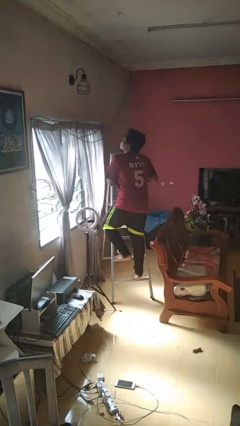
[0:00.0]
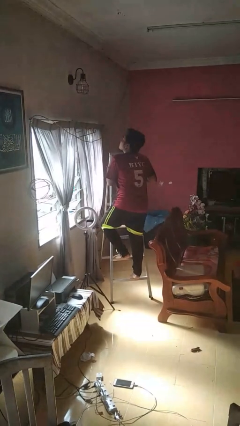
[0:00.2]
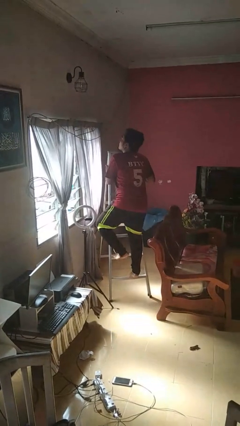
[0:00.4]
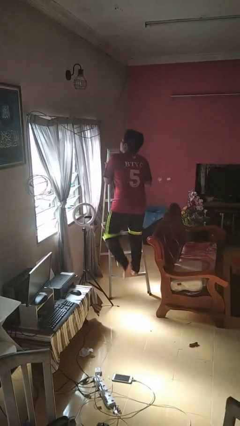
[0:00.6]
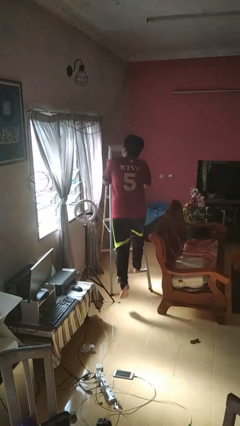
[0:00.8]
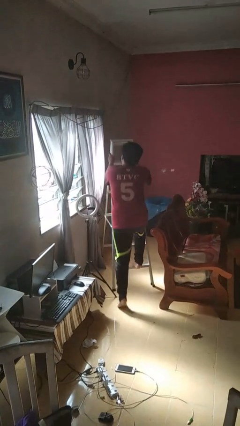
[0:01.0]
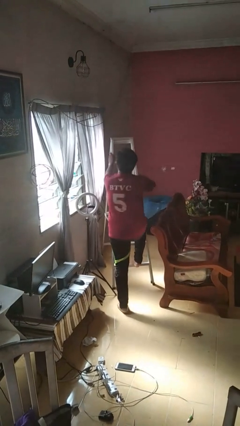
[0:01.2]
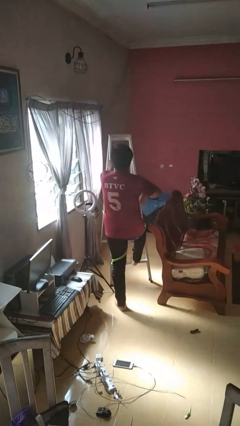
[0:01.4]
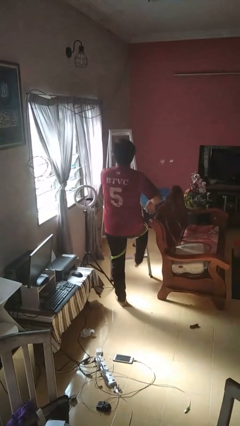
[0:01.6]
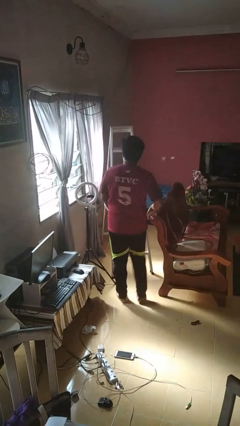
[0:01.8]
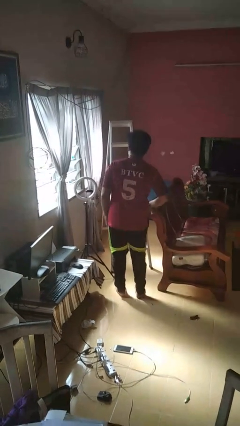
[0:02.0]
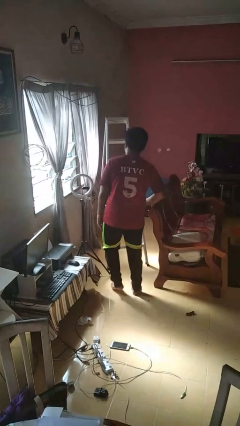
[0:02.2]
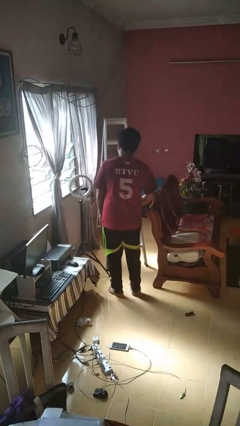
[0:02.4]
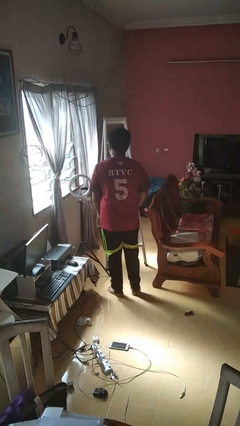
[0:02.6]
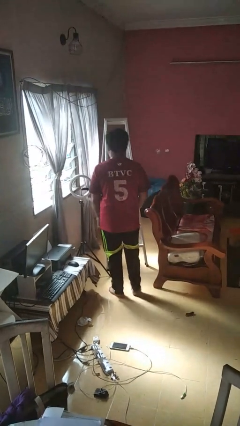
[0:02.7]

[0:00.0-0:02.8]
person climbs down ladder

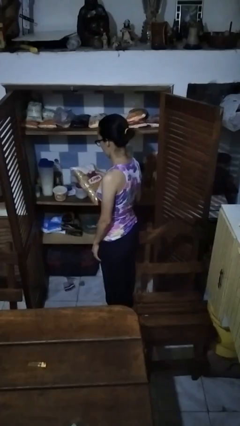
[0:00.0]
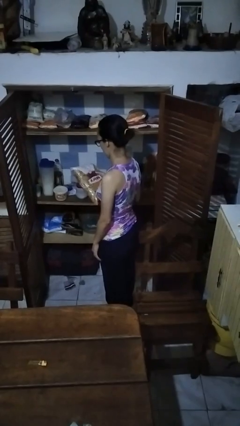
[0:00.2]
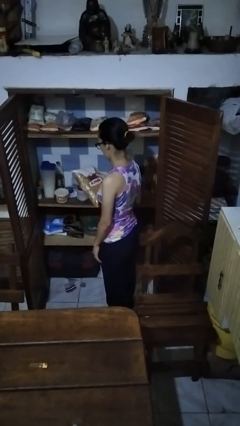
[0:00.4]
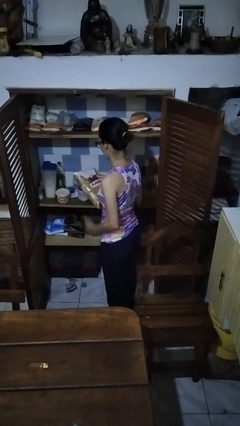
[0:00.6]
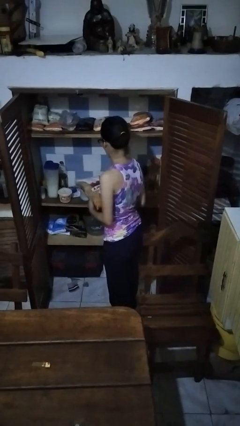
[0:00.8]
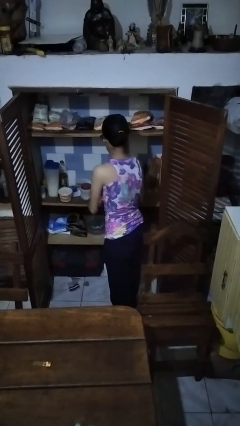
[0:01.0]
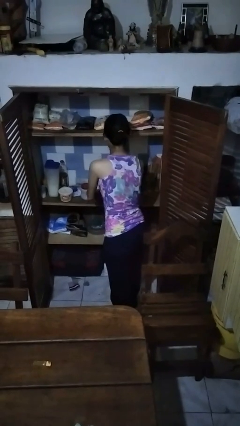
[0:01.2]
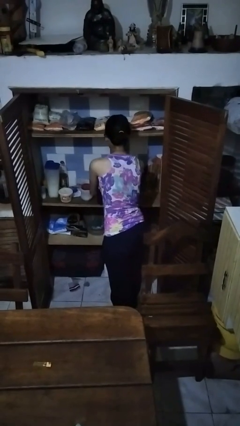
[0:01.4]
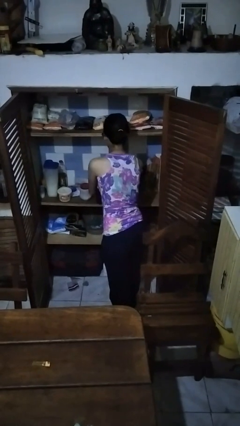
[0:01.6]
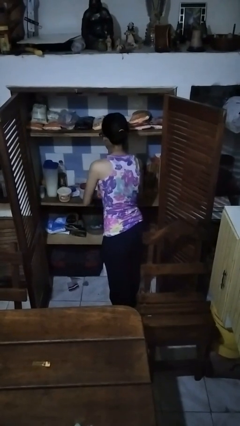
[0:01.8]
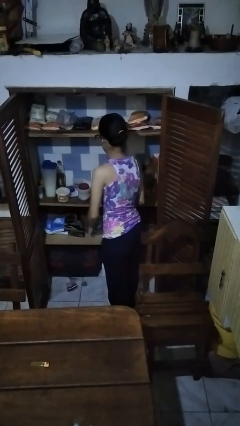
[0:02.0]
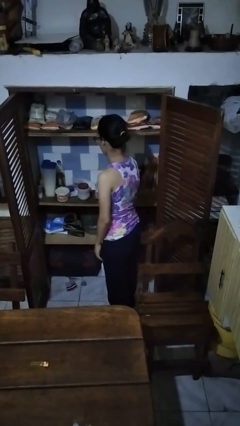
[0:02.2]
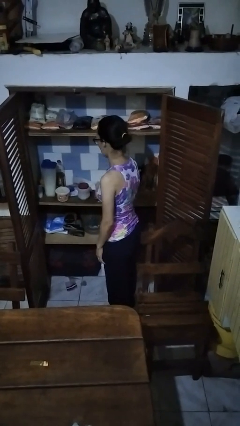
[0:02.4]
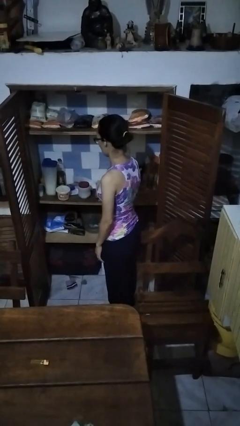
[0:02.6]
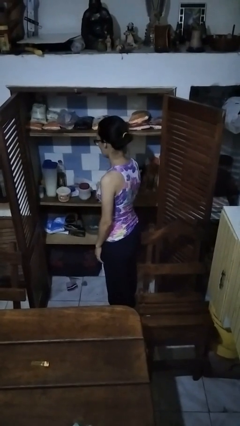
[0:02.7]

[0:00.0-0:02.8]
person puts object in cabinet

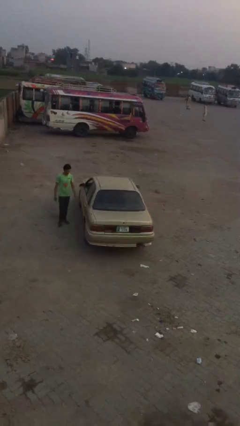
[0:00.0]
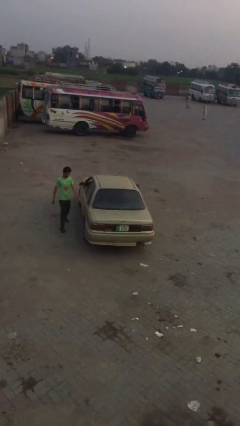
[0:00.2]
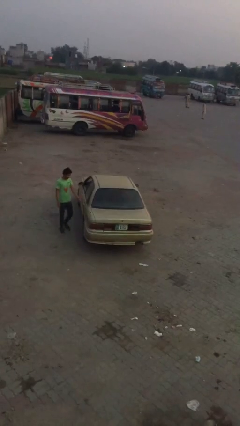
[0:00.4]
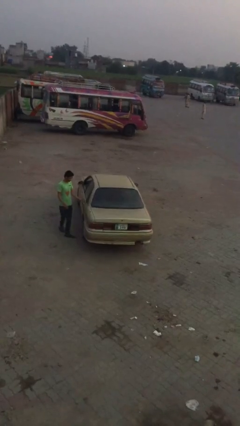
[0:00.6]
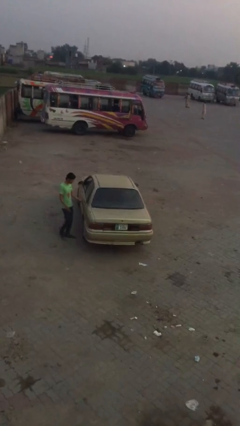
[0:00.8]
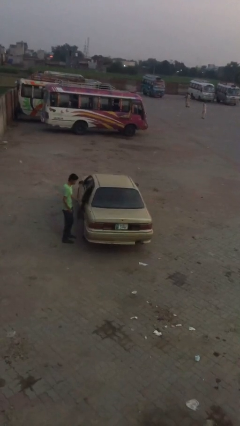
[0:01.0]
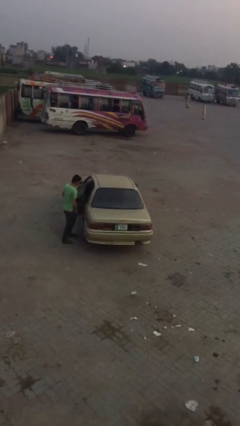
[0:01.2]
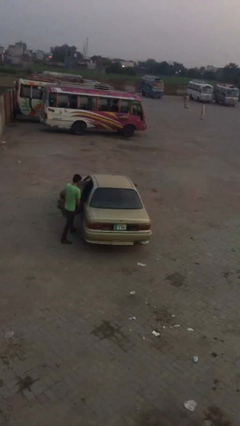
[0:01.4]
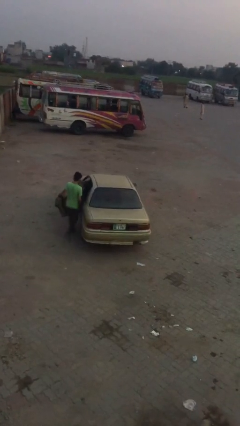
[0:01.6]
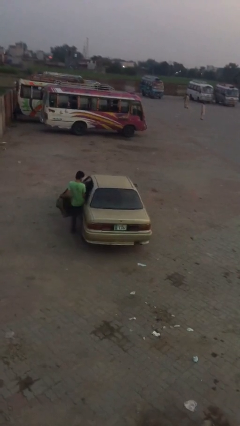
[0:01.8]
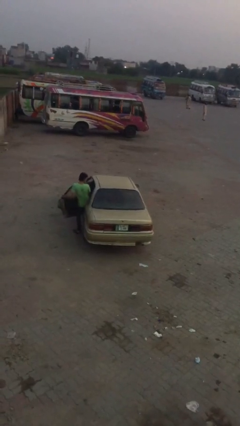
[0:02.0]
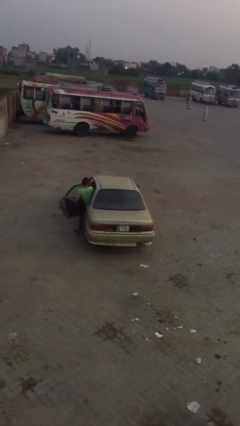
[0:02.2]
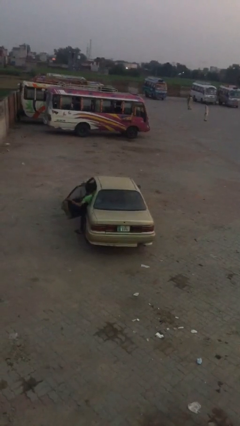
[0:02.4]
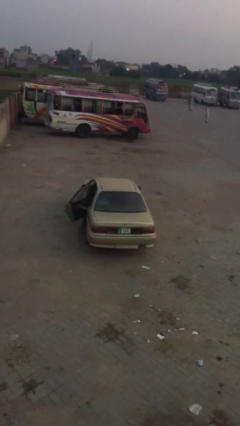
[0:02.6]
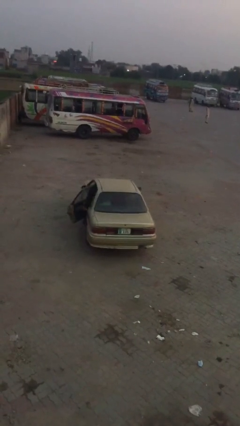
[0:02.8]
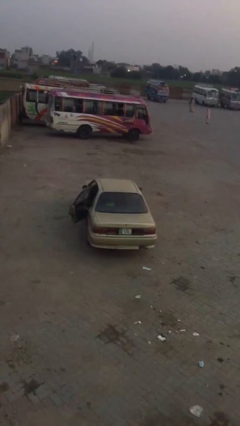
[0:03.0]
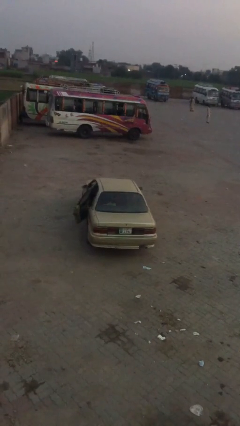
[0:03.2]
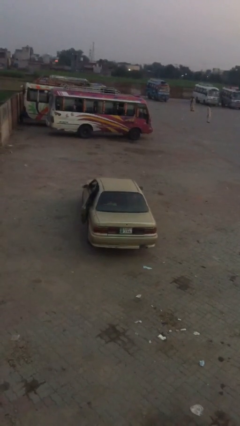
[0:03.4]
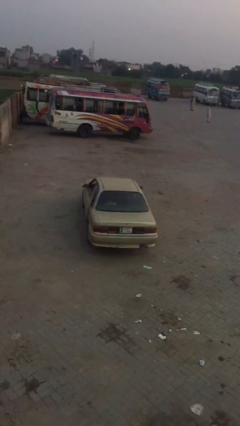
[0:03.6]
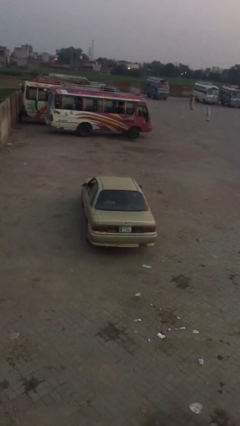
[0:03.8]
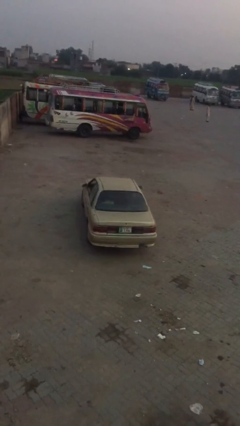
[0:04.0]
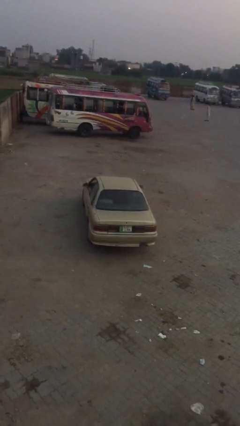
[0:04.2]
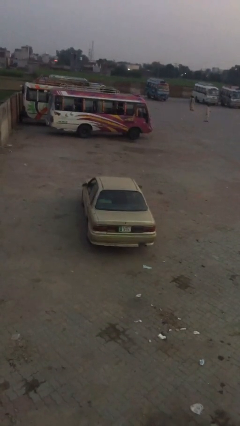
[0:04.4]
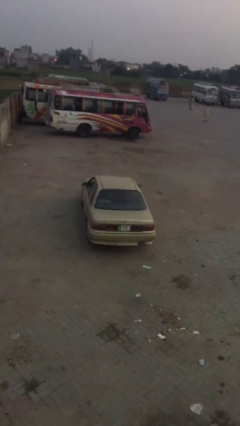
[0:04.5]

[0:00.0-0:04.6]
car picks up person

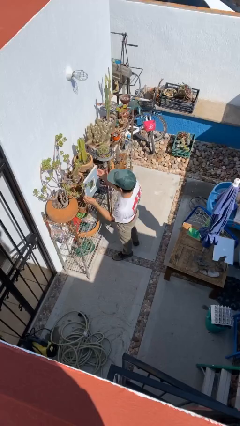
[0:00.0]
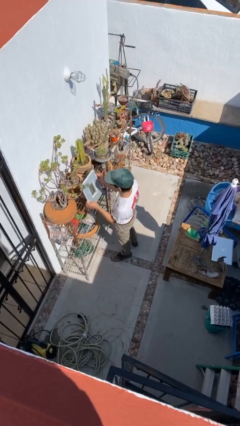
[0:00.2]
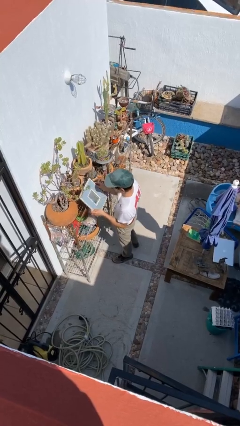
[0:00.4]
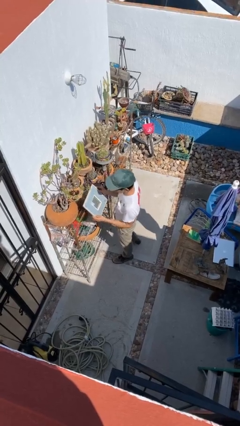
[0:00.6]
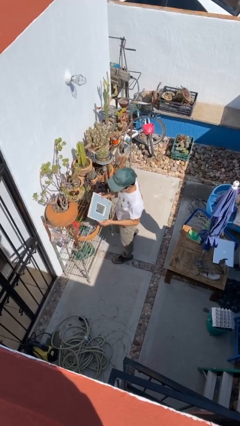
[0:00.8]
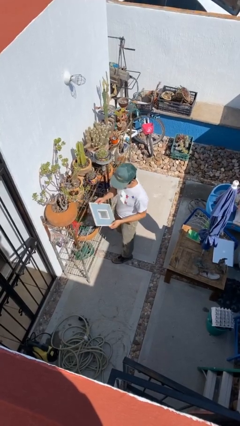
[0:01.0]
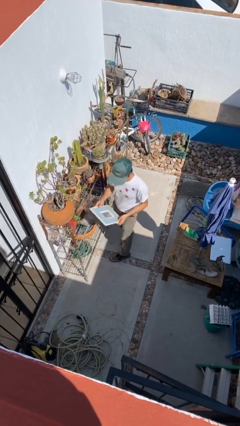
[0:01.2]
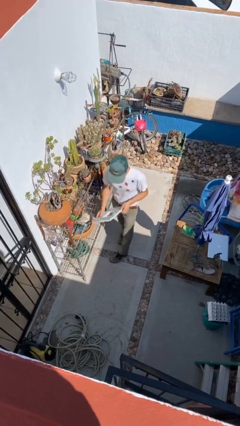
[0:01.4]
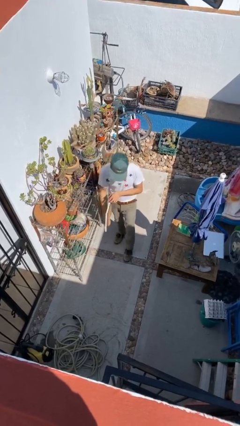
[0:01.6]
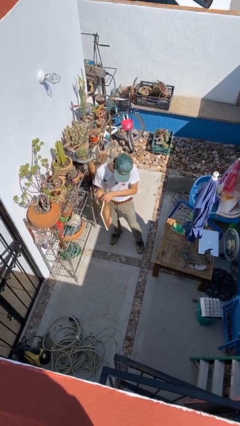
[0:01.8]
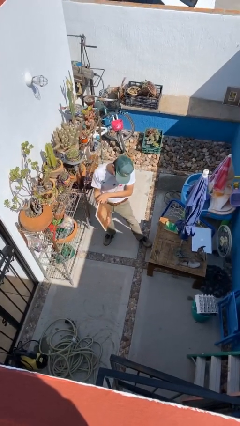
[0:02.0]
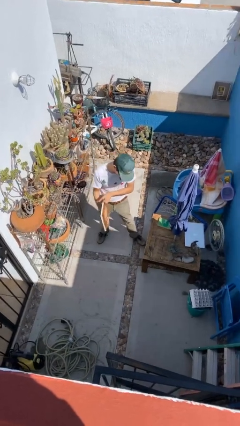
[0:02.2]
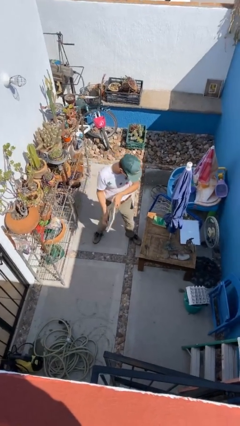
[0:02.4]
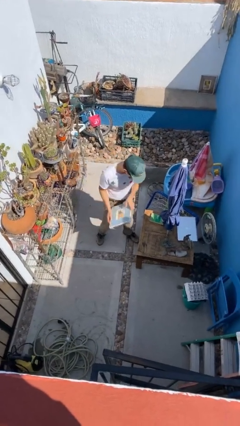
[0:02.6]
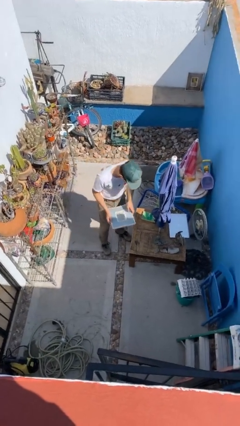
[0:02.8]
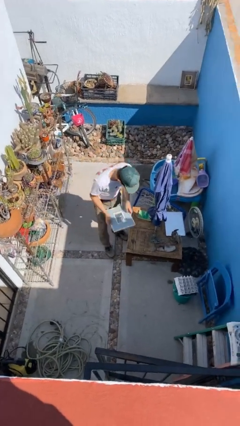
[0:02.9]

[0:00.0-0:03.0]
person picks up object from shelf

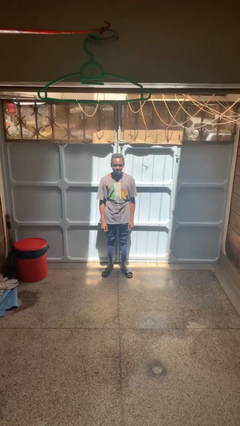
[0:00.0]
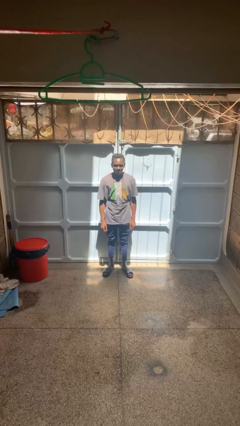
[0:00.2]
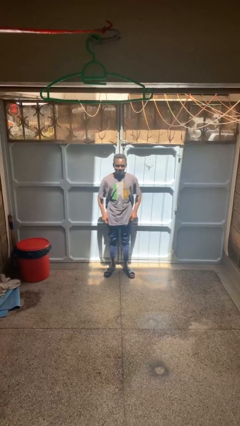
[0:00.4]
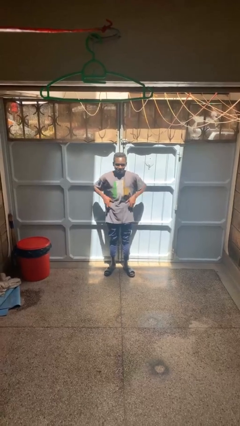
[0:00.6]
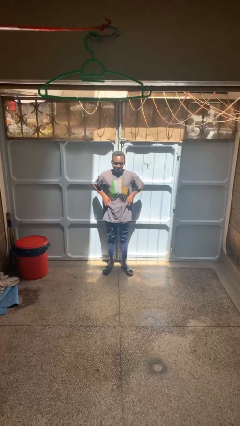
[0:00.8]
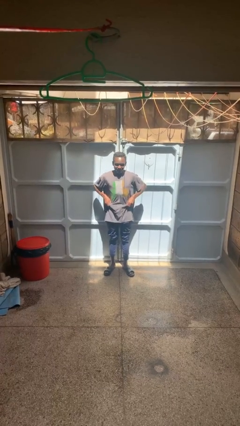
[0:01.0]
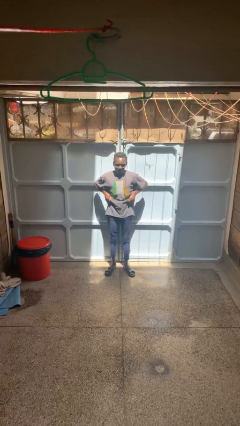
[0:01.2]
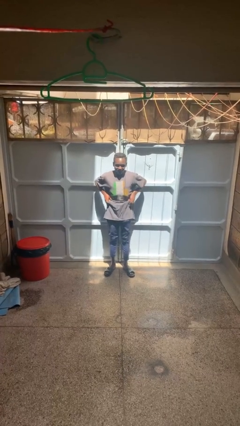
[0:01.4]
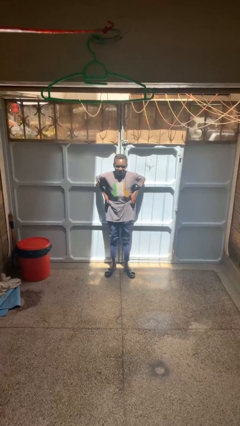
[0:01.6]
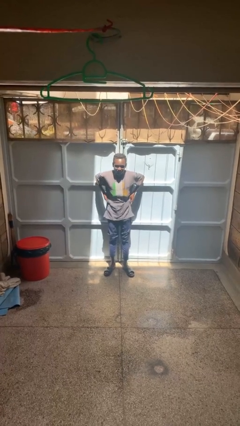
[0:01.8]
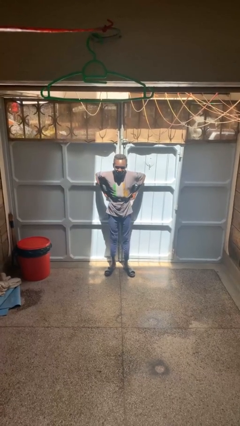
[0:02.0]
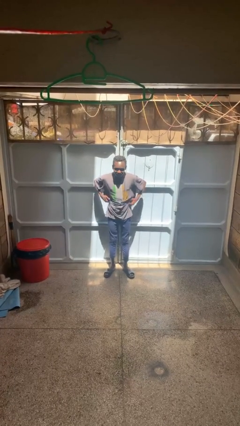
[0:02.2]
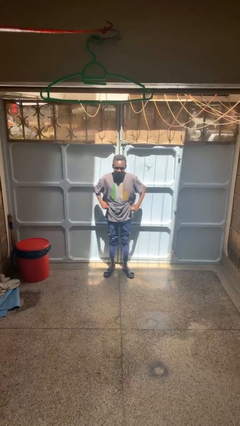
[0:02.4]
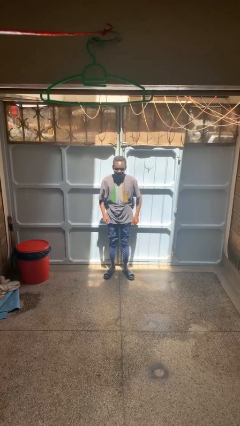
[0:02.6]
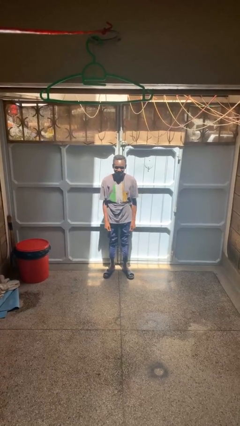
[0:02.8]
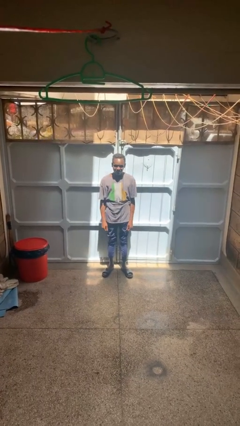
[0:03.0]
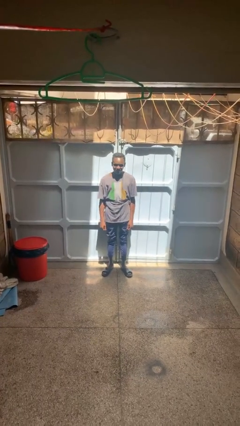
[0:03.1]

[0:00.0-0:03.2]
person hikes up pants

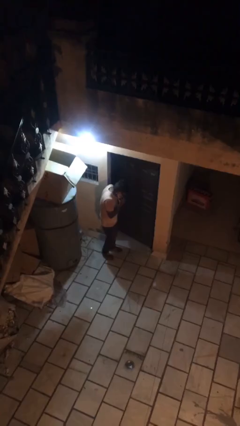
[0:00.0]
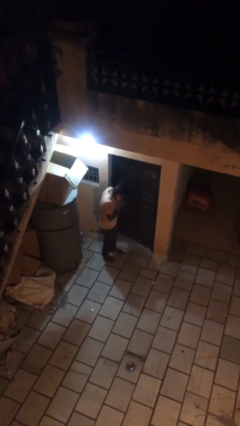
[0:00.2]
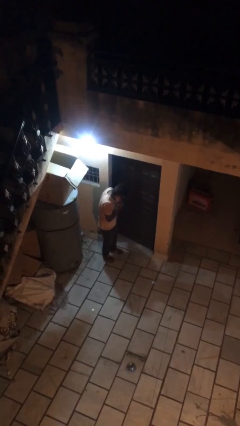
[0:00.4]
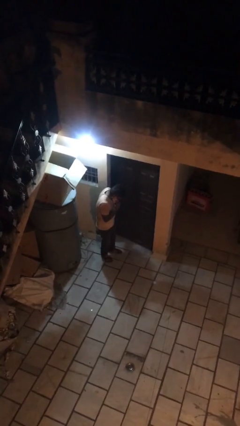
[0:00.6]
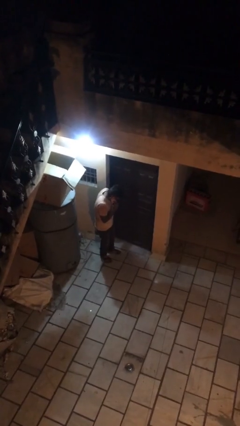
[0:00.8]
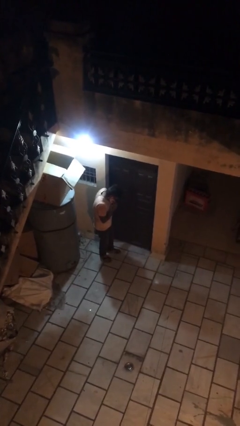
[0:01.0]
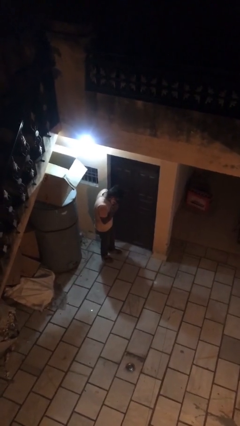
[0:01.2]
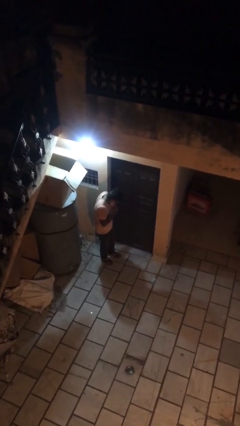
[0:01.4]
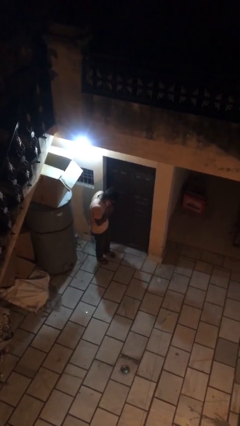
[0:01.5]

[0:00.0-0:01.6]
person closes facility door
